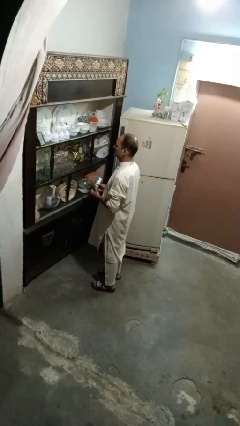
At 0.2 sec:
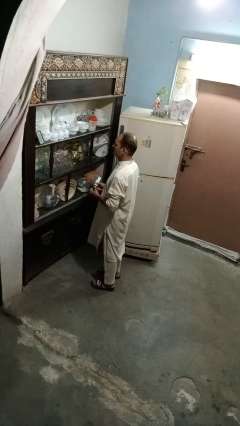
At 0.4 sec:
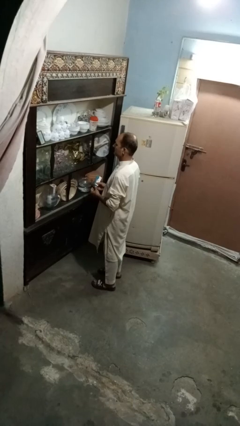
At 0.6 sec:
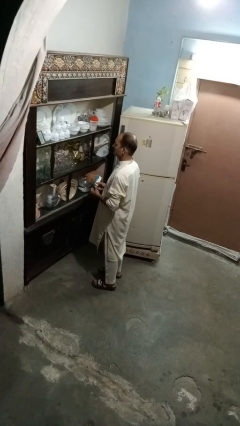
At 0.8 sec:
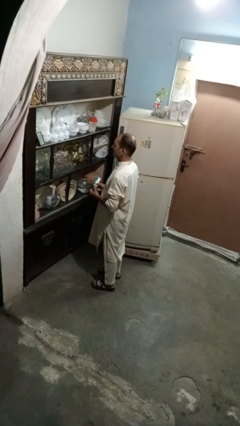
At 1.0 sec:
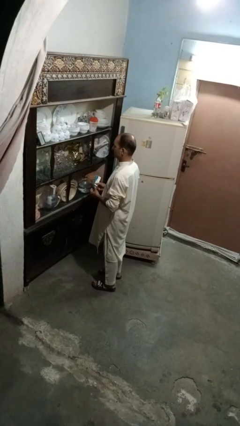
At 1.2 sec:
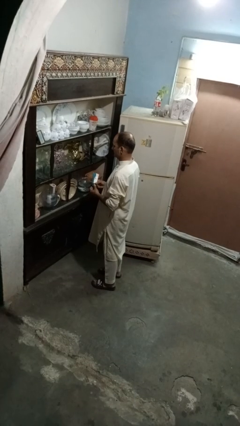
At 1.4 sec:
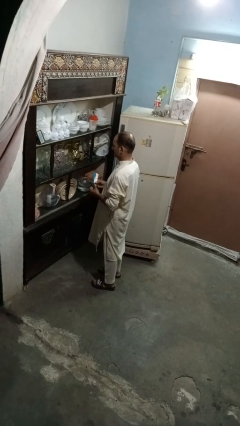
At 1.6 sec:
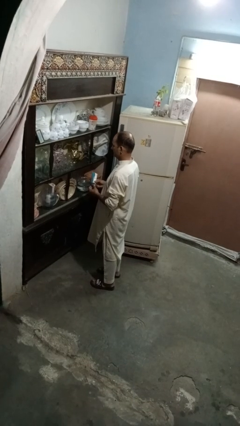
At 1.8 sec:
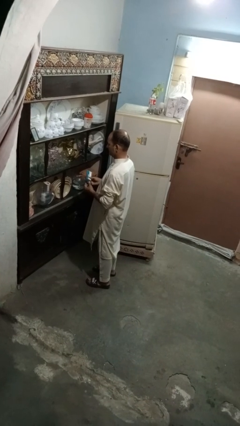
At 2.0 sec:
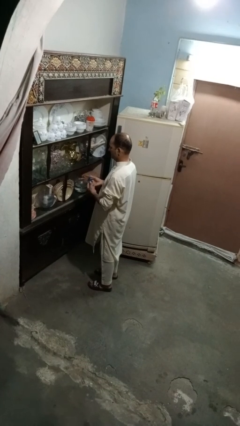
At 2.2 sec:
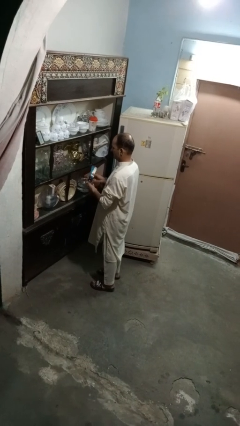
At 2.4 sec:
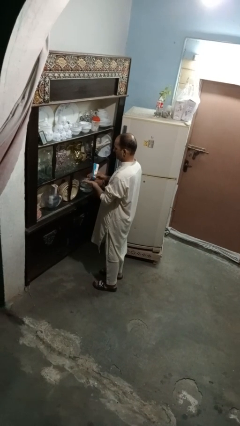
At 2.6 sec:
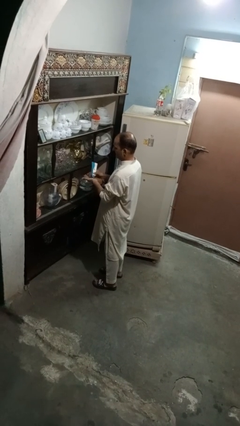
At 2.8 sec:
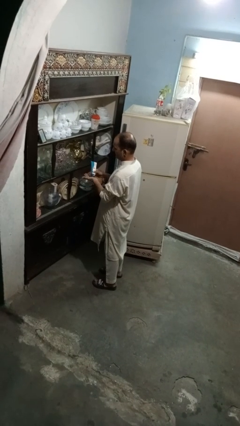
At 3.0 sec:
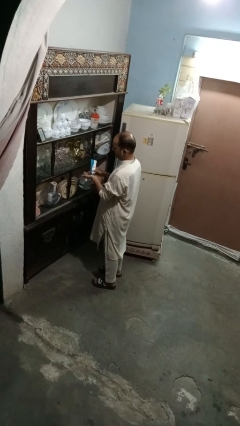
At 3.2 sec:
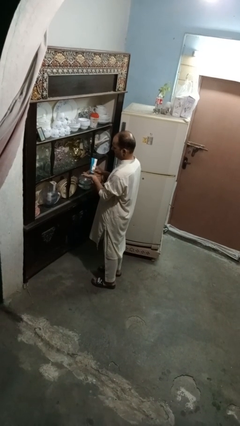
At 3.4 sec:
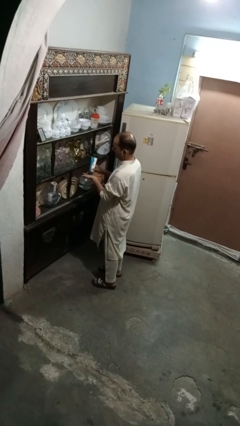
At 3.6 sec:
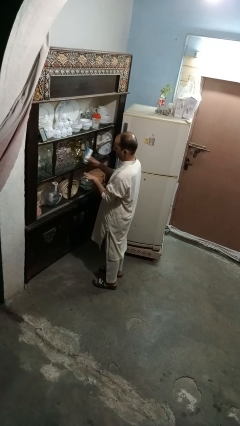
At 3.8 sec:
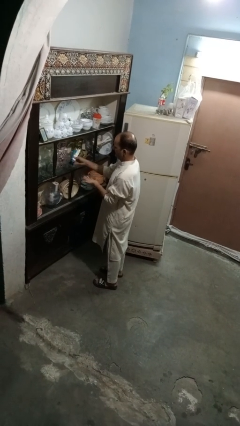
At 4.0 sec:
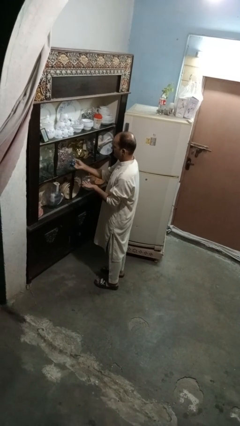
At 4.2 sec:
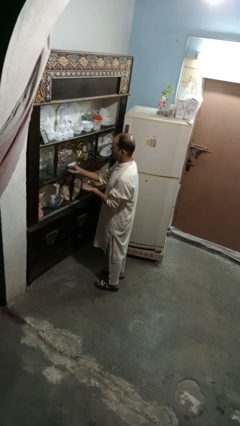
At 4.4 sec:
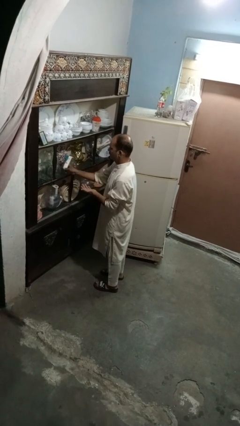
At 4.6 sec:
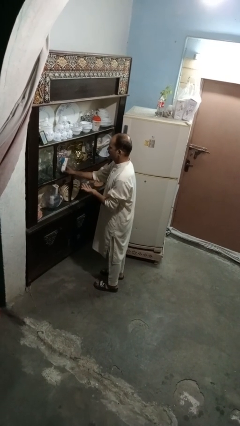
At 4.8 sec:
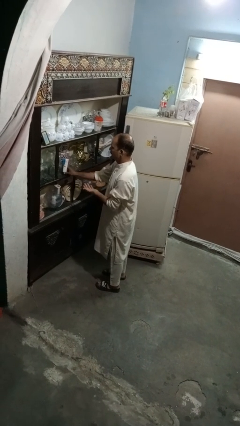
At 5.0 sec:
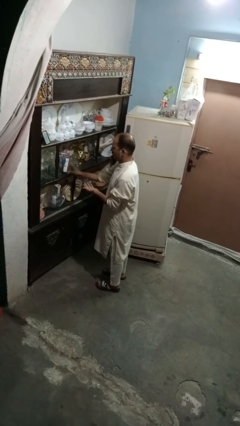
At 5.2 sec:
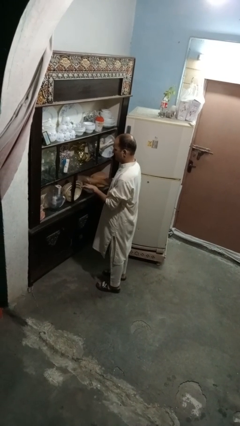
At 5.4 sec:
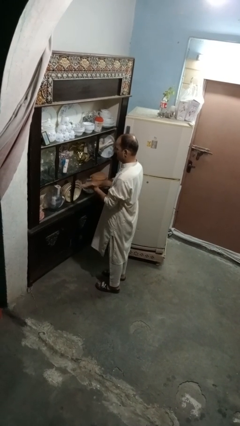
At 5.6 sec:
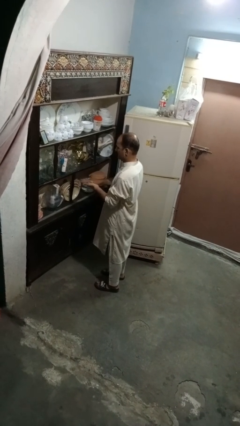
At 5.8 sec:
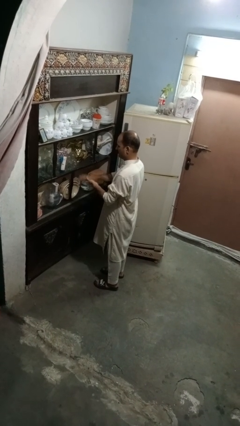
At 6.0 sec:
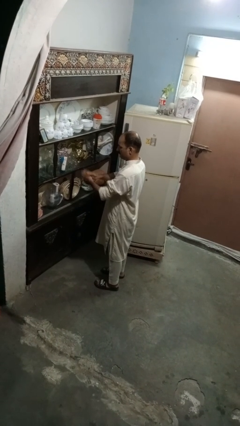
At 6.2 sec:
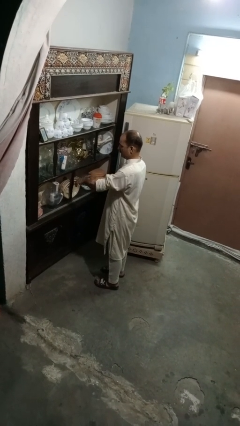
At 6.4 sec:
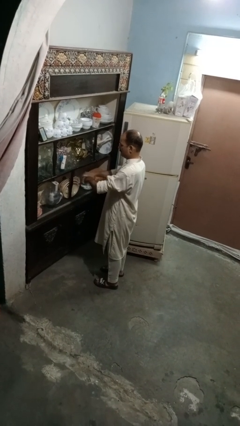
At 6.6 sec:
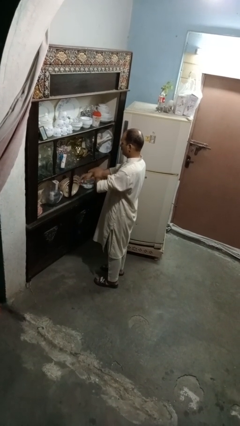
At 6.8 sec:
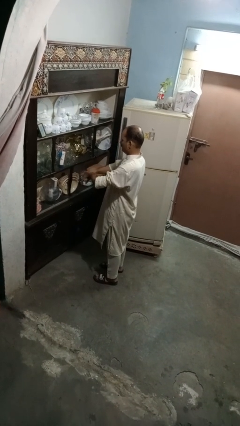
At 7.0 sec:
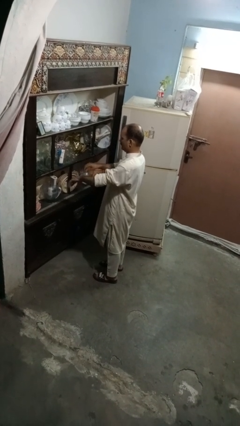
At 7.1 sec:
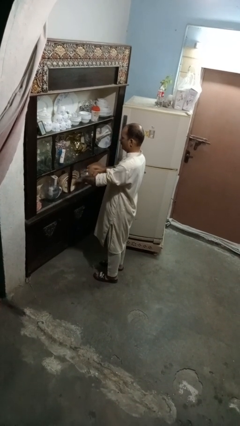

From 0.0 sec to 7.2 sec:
person applies sunscreen

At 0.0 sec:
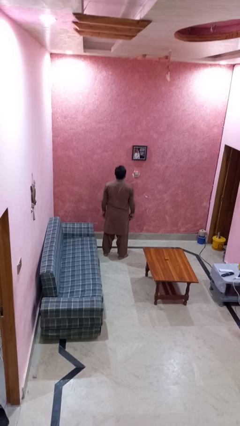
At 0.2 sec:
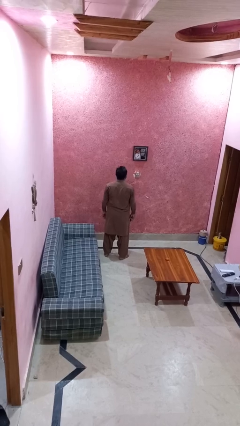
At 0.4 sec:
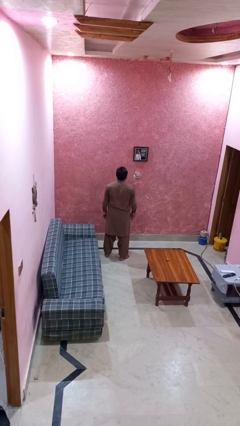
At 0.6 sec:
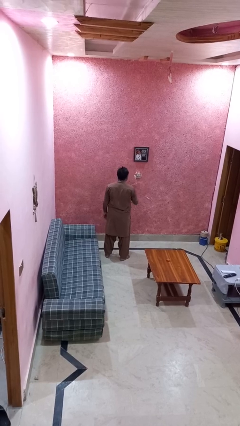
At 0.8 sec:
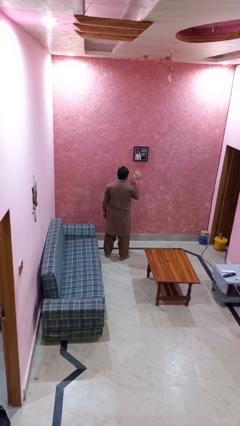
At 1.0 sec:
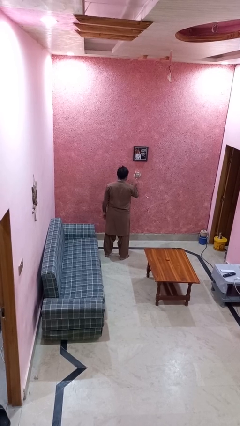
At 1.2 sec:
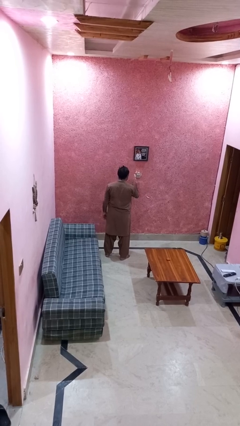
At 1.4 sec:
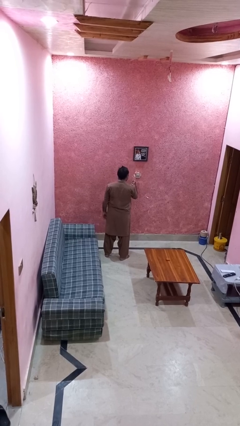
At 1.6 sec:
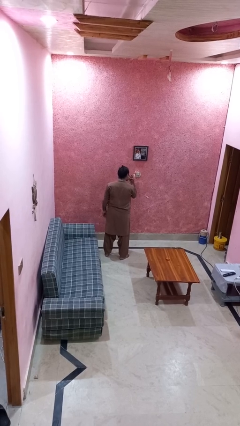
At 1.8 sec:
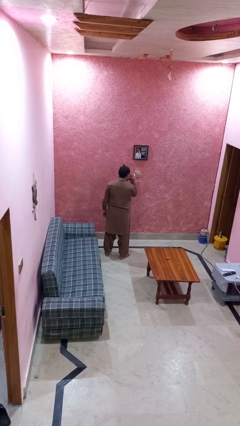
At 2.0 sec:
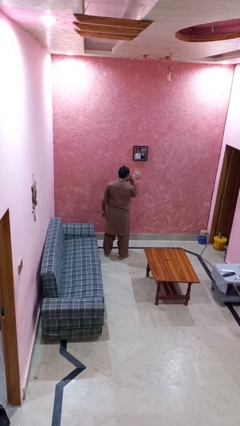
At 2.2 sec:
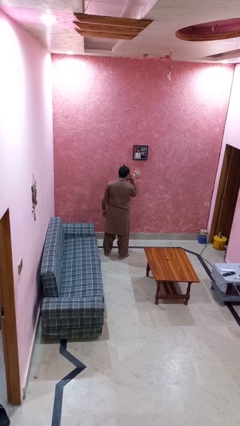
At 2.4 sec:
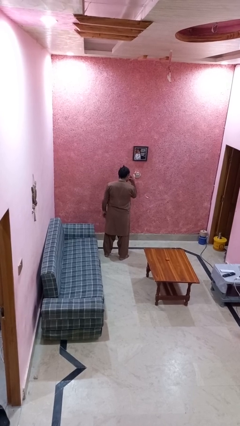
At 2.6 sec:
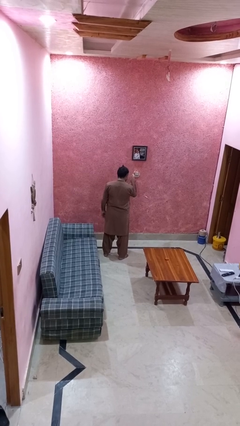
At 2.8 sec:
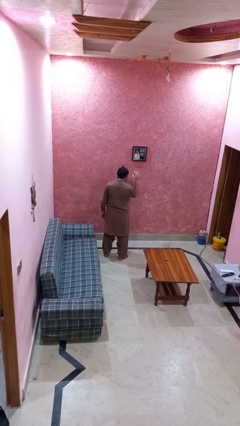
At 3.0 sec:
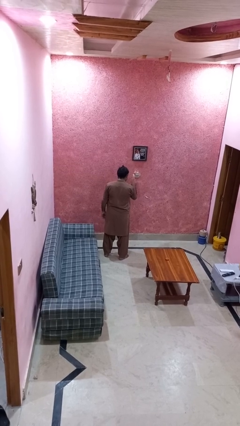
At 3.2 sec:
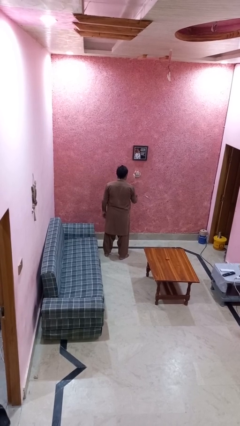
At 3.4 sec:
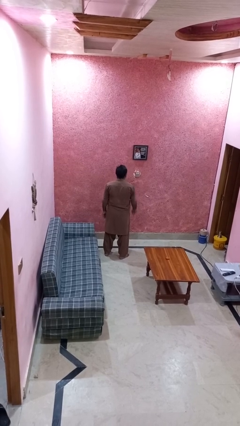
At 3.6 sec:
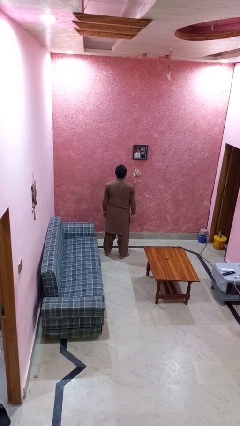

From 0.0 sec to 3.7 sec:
person gestures watch closely

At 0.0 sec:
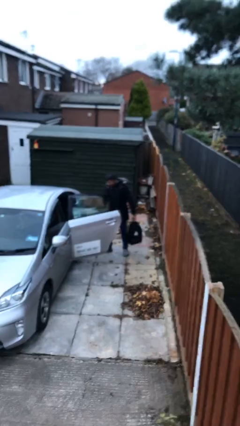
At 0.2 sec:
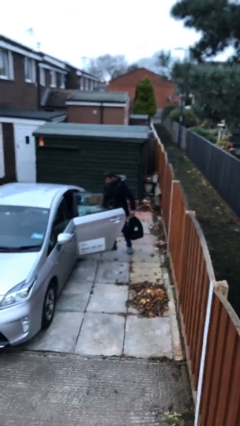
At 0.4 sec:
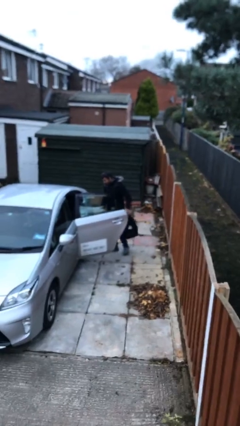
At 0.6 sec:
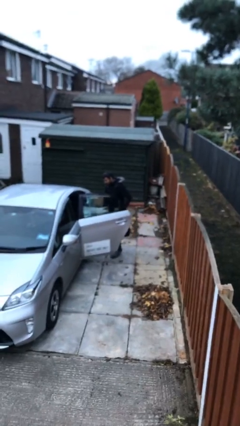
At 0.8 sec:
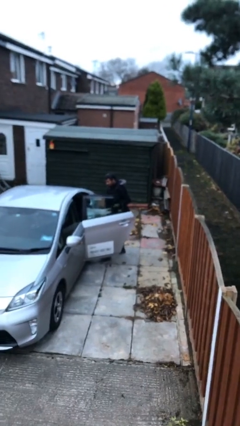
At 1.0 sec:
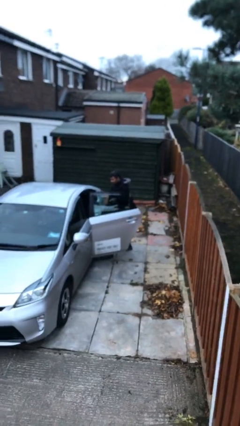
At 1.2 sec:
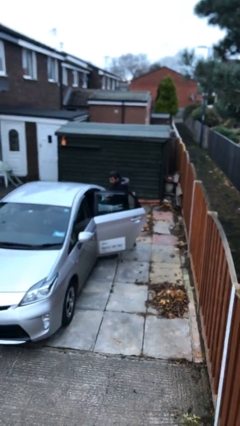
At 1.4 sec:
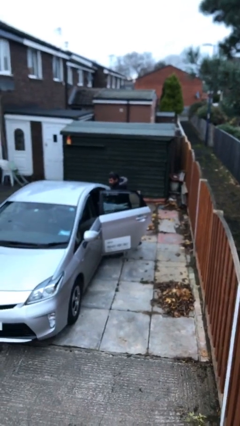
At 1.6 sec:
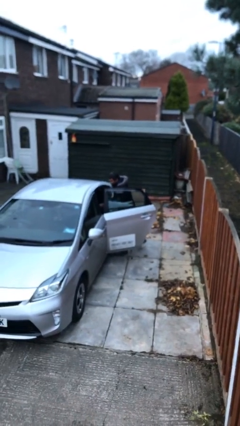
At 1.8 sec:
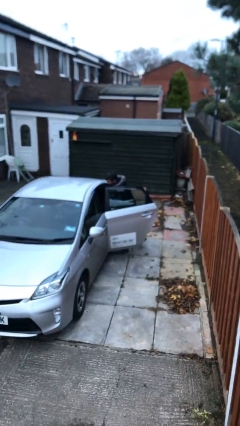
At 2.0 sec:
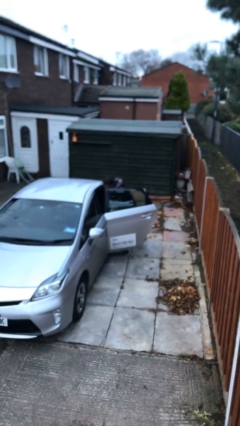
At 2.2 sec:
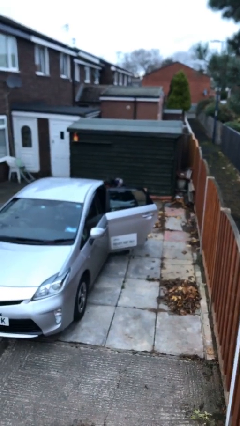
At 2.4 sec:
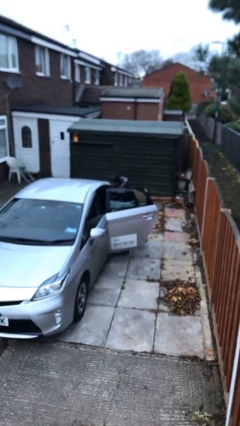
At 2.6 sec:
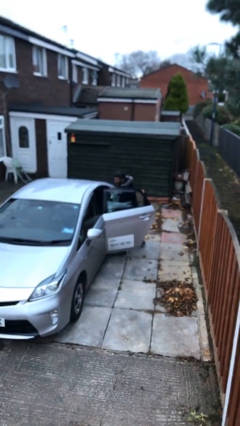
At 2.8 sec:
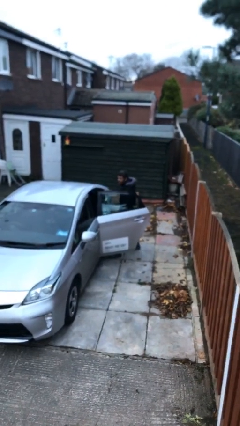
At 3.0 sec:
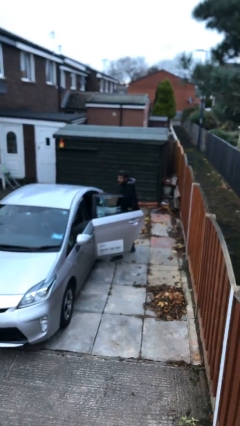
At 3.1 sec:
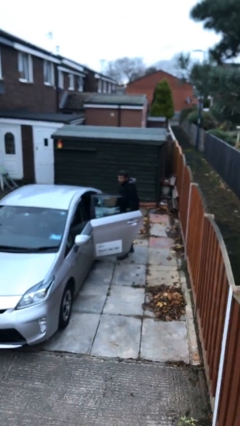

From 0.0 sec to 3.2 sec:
person loads car

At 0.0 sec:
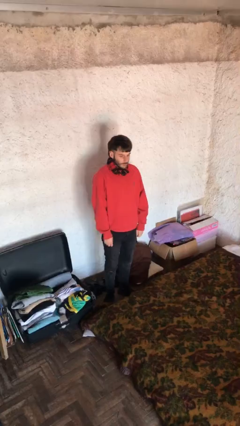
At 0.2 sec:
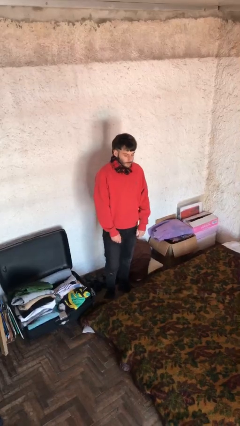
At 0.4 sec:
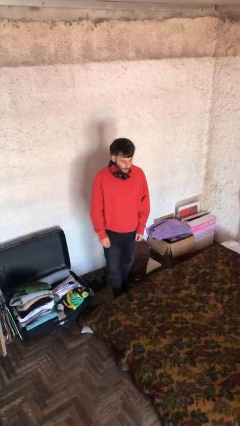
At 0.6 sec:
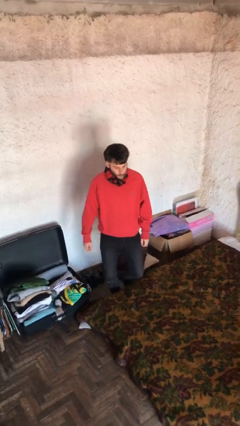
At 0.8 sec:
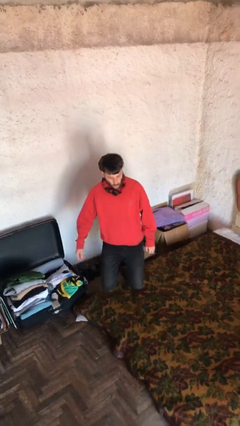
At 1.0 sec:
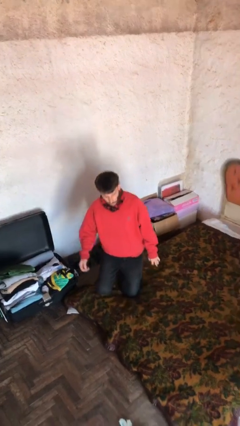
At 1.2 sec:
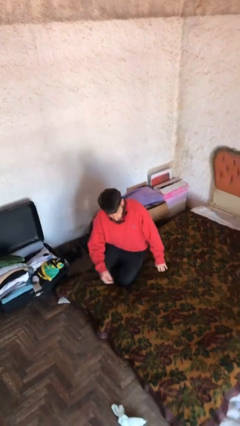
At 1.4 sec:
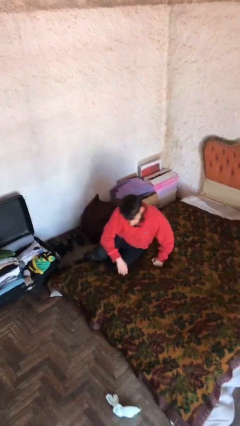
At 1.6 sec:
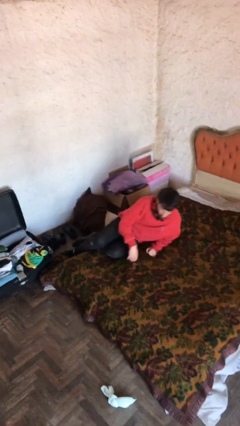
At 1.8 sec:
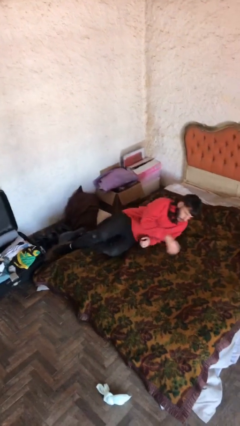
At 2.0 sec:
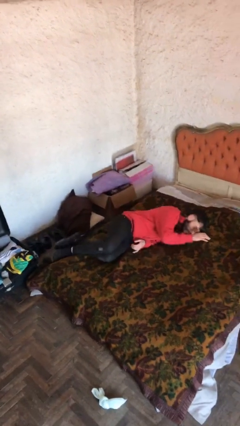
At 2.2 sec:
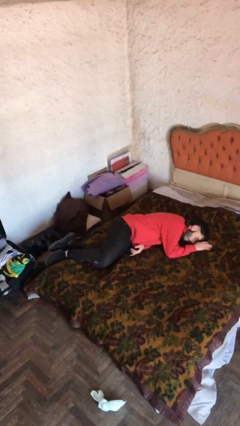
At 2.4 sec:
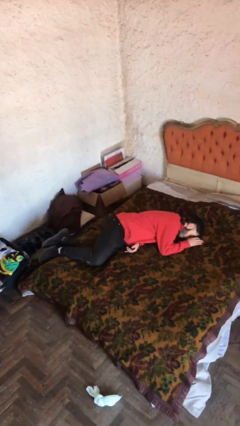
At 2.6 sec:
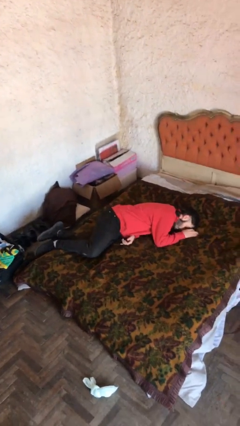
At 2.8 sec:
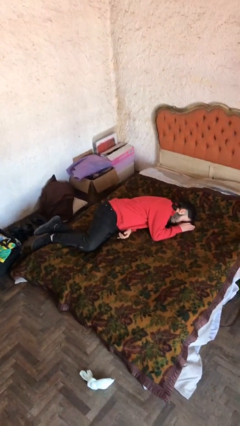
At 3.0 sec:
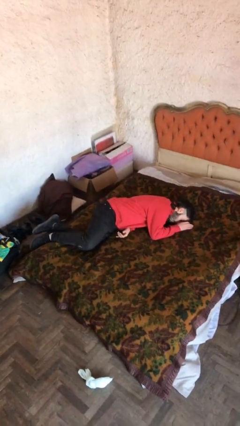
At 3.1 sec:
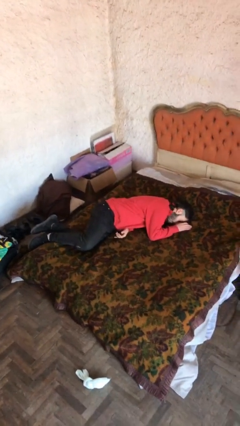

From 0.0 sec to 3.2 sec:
person lies down on bed
